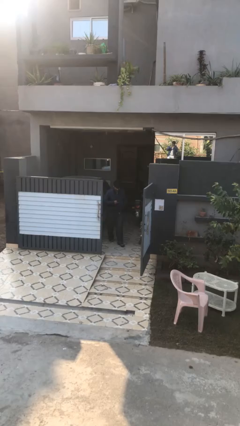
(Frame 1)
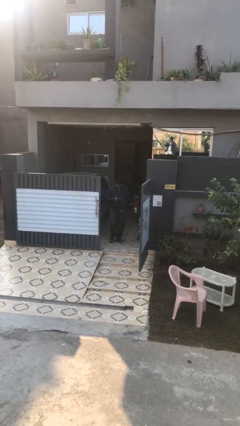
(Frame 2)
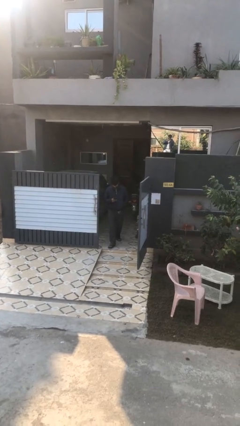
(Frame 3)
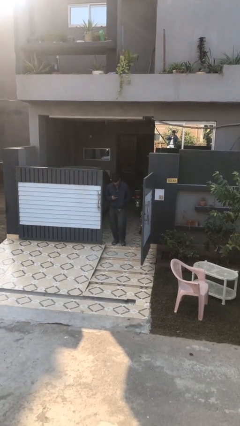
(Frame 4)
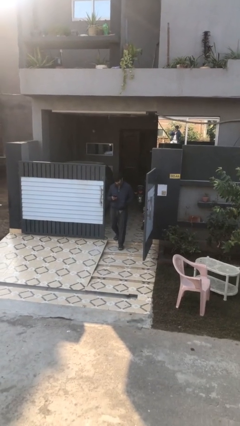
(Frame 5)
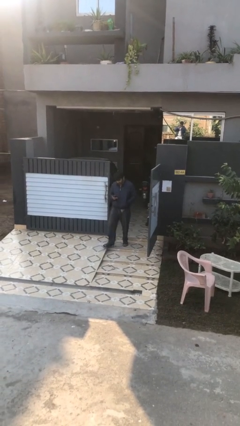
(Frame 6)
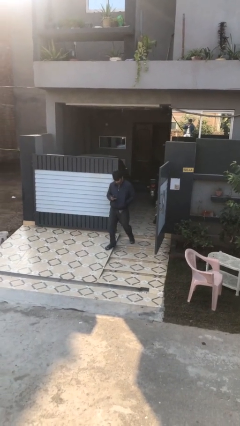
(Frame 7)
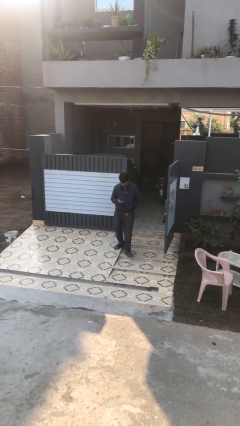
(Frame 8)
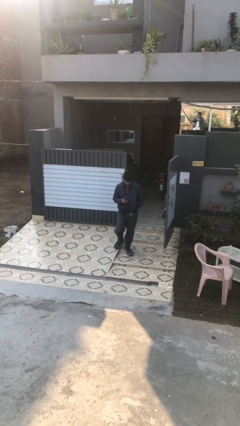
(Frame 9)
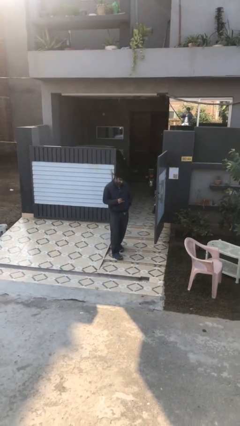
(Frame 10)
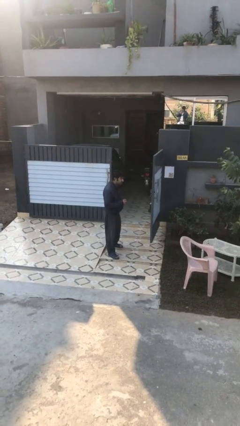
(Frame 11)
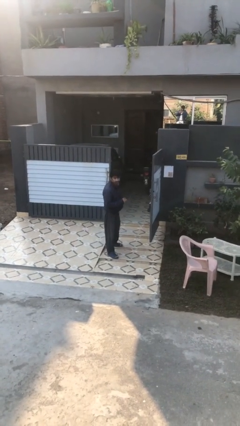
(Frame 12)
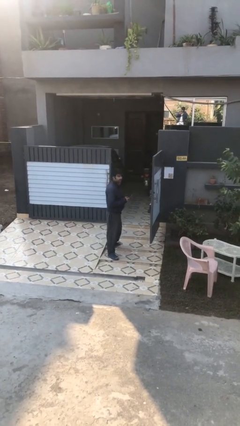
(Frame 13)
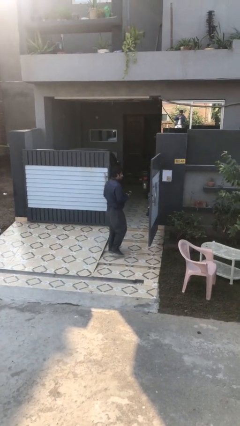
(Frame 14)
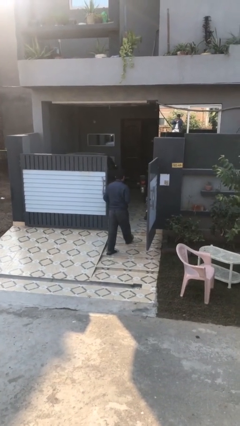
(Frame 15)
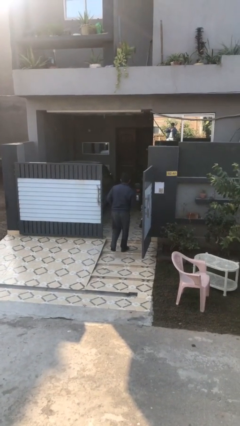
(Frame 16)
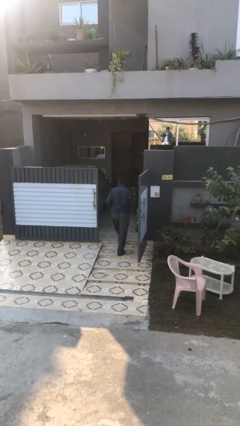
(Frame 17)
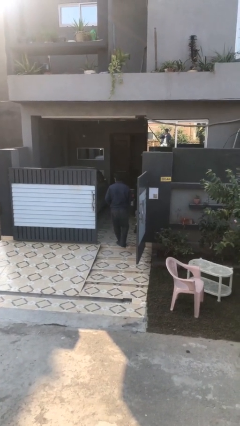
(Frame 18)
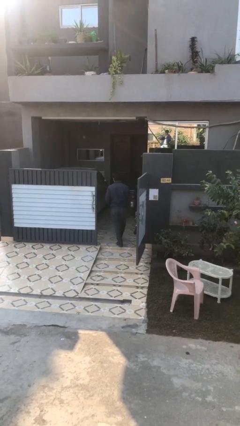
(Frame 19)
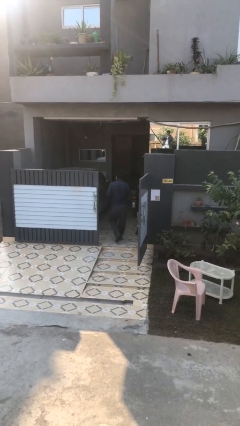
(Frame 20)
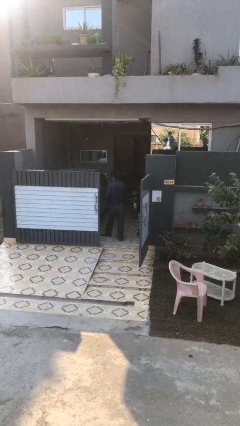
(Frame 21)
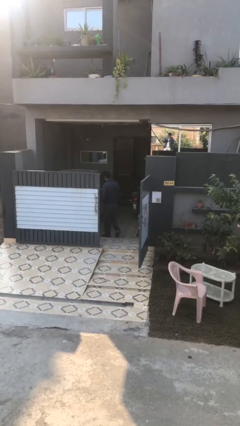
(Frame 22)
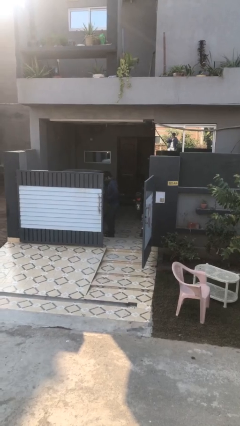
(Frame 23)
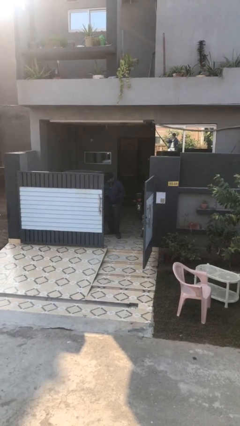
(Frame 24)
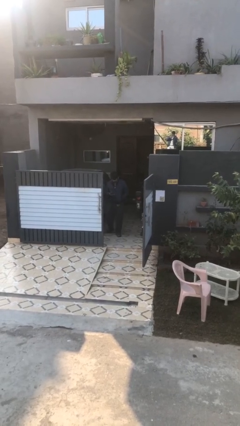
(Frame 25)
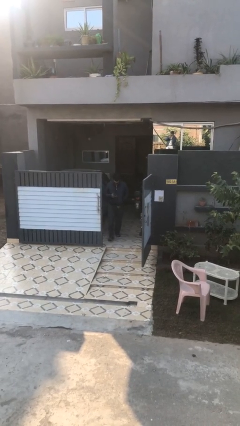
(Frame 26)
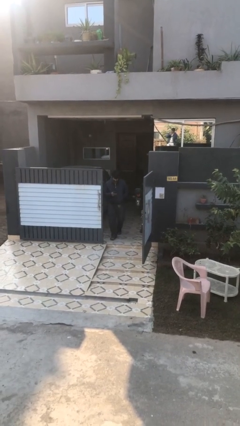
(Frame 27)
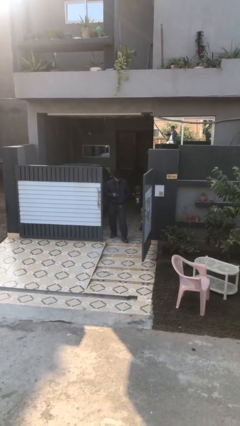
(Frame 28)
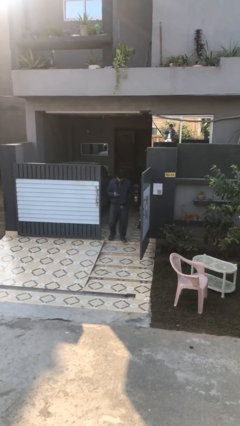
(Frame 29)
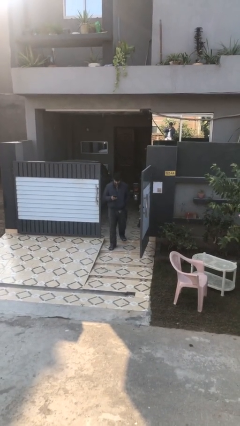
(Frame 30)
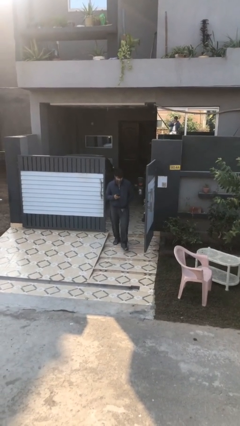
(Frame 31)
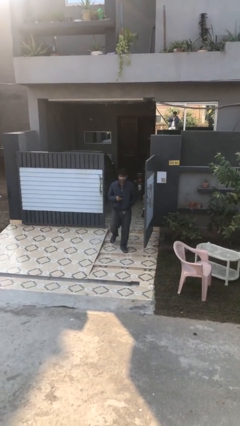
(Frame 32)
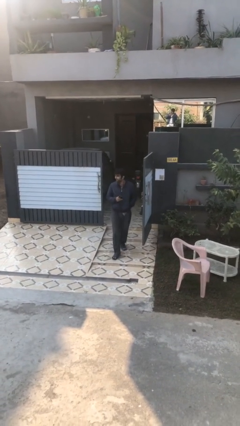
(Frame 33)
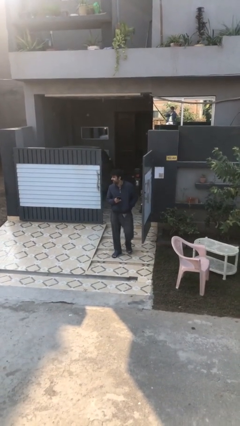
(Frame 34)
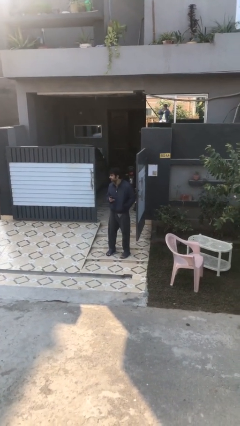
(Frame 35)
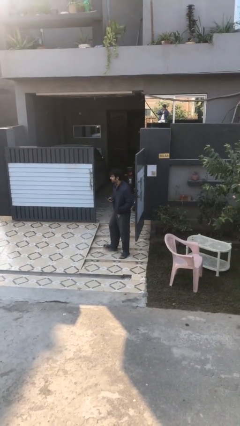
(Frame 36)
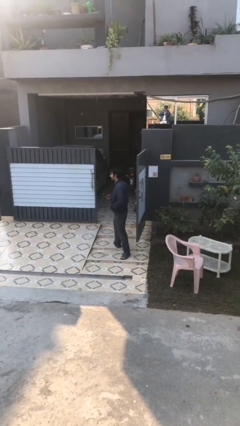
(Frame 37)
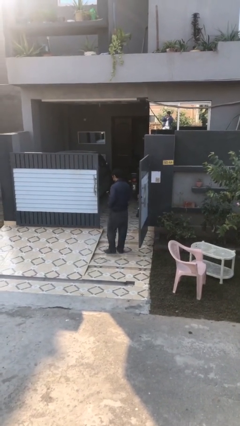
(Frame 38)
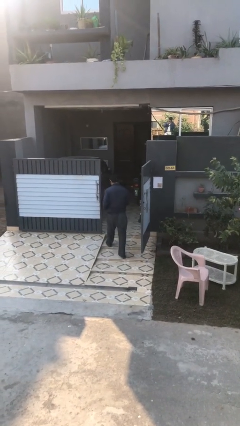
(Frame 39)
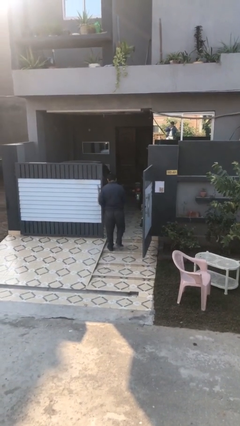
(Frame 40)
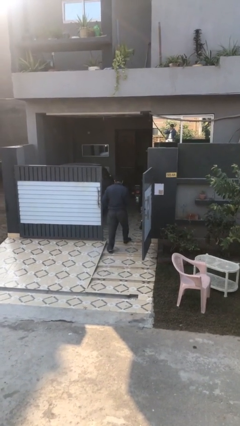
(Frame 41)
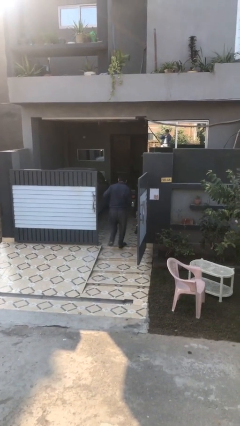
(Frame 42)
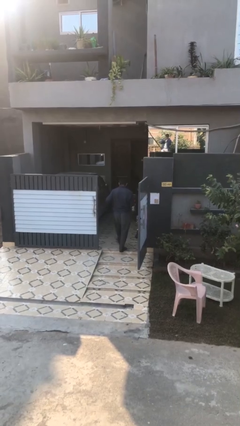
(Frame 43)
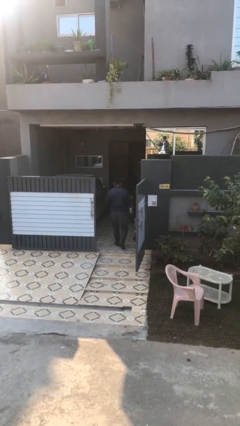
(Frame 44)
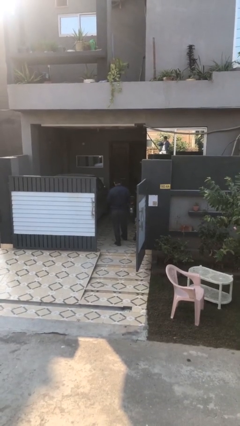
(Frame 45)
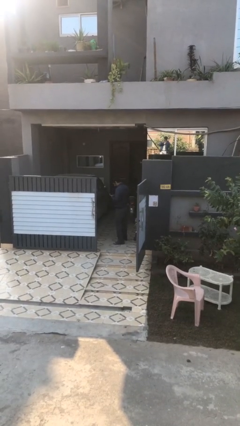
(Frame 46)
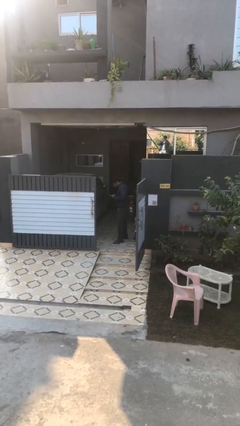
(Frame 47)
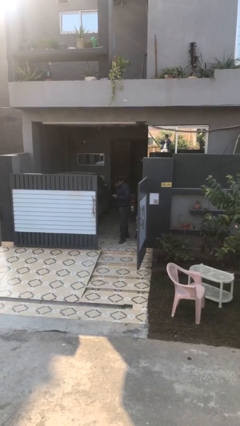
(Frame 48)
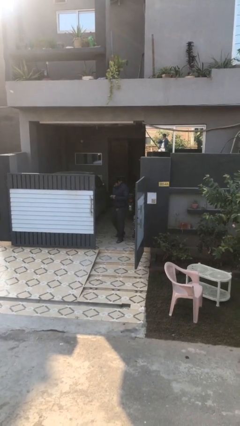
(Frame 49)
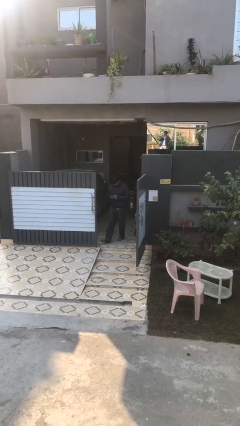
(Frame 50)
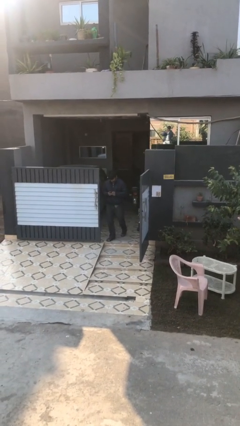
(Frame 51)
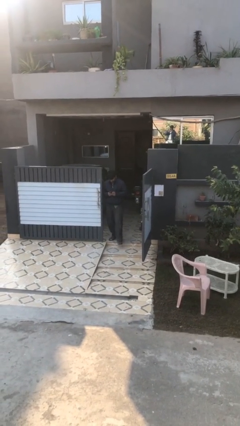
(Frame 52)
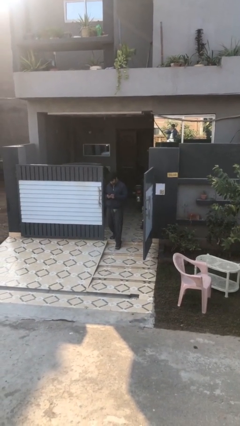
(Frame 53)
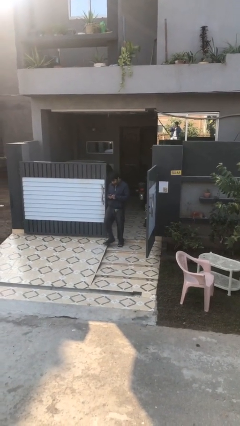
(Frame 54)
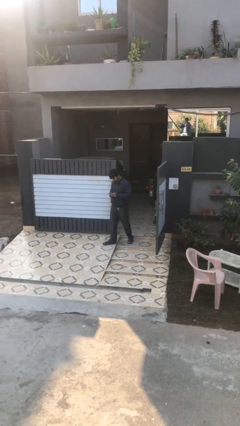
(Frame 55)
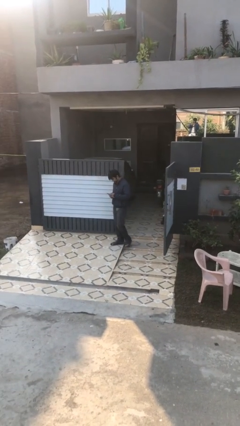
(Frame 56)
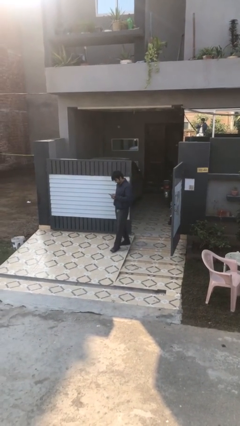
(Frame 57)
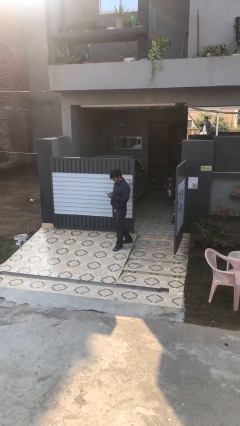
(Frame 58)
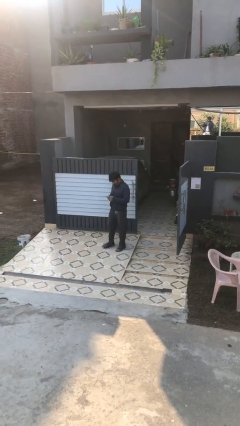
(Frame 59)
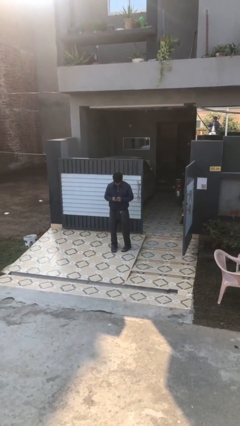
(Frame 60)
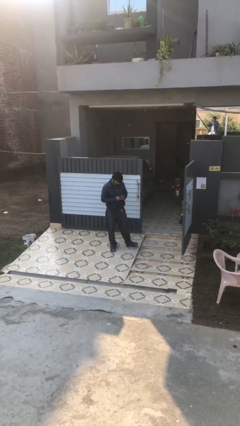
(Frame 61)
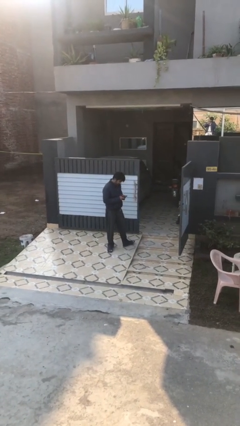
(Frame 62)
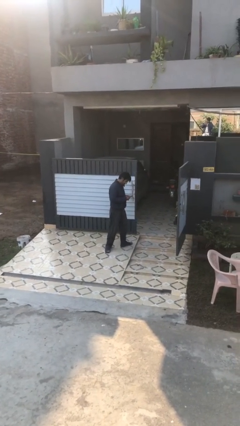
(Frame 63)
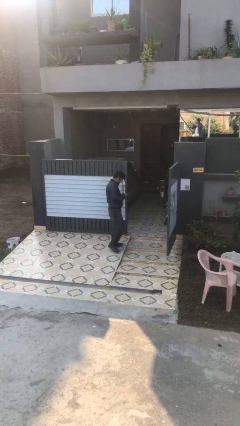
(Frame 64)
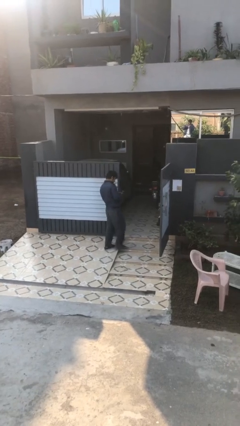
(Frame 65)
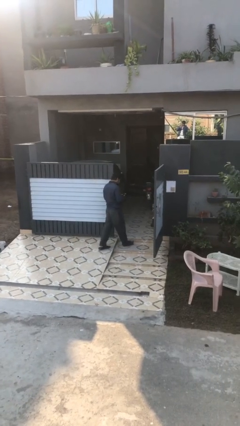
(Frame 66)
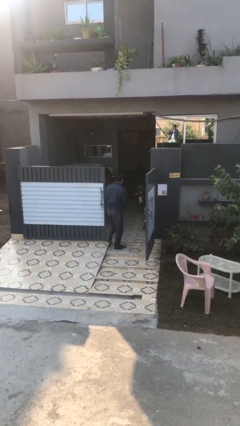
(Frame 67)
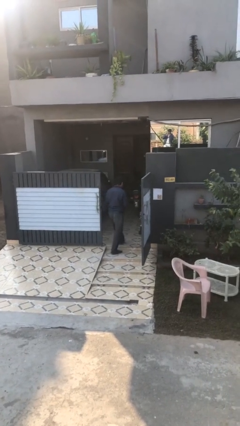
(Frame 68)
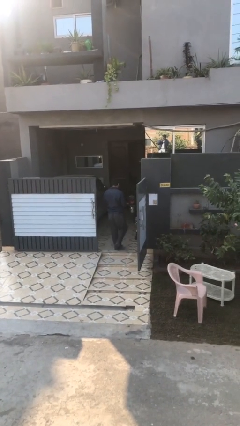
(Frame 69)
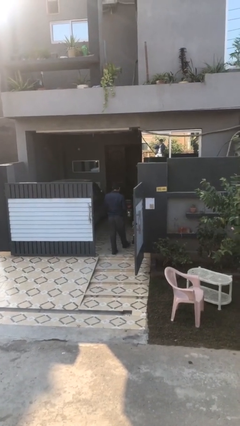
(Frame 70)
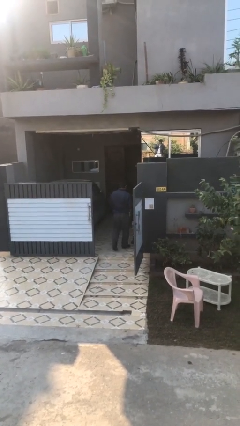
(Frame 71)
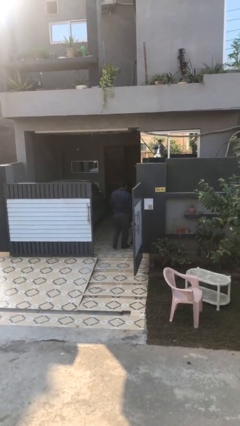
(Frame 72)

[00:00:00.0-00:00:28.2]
person texts on phone

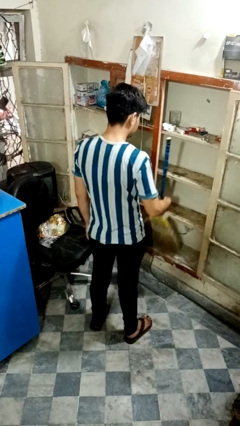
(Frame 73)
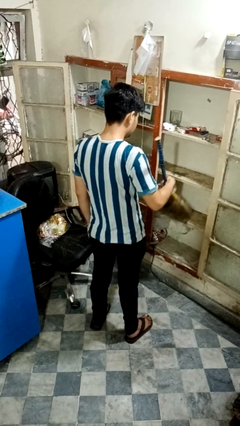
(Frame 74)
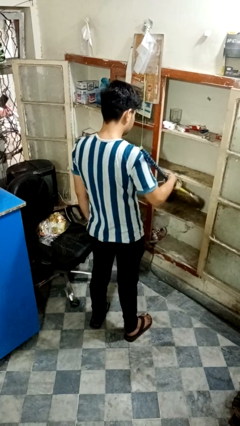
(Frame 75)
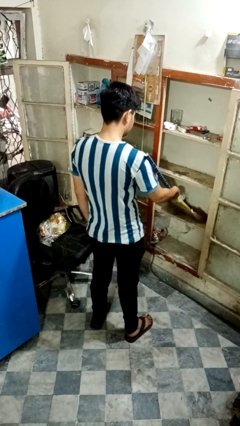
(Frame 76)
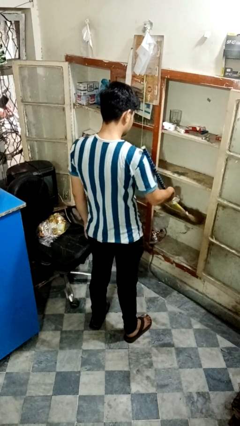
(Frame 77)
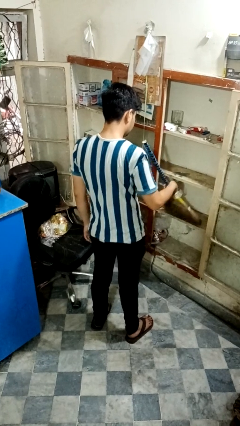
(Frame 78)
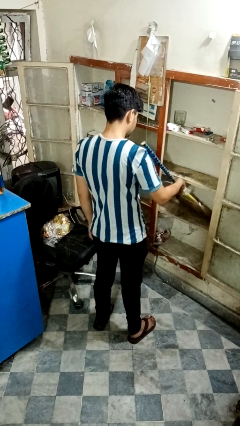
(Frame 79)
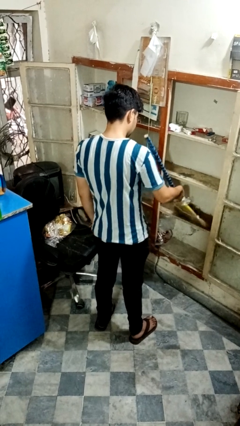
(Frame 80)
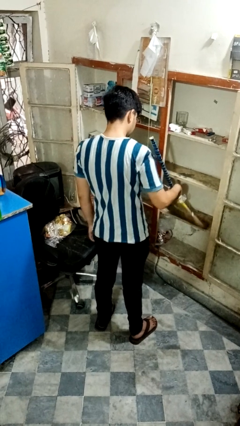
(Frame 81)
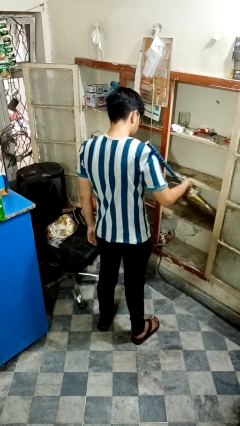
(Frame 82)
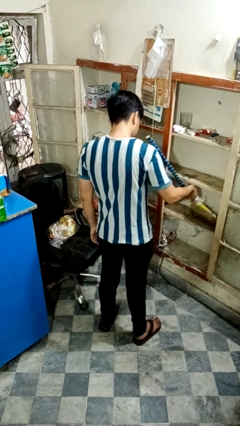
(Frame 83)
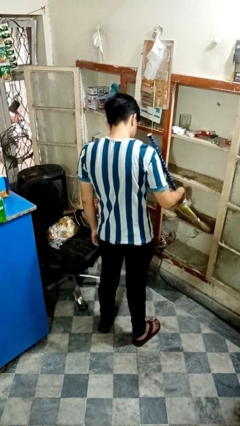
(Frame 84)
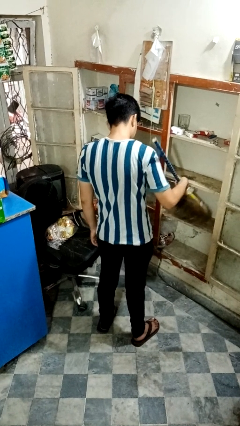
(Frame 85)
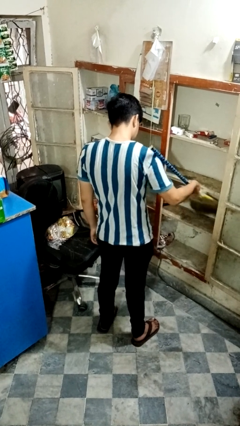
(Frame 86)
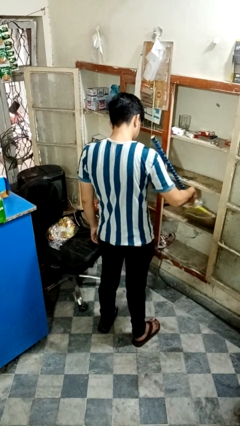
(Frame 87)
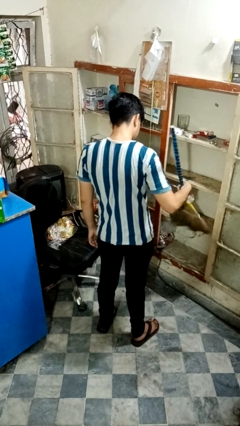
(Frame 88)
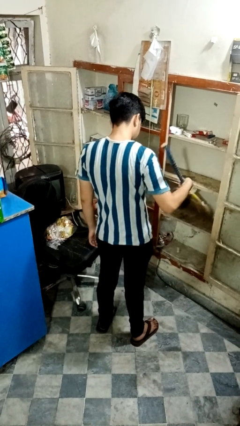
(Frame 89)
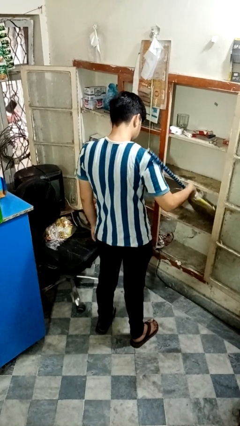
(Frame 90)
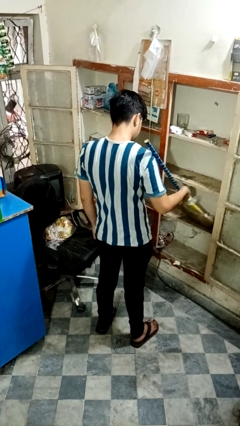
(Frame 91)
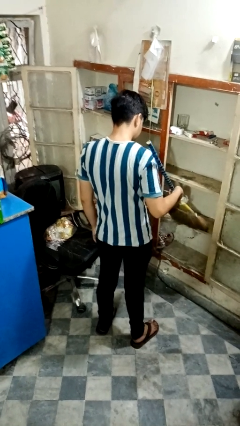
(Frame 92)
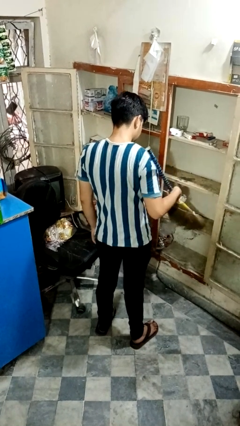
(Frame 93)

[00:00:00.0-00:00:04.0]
person dusts furniture
